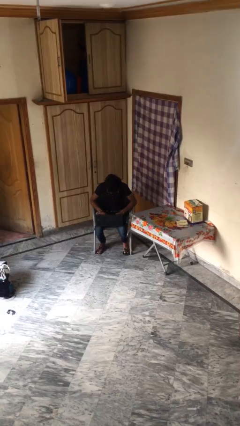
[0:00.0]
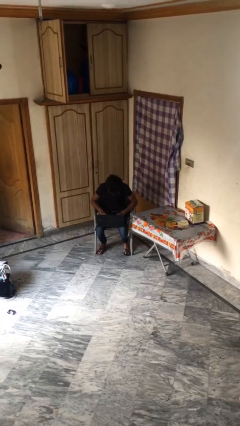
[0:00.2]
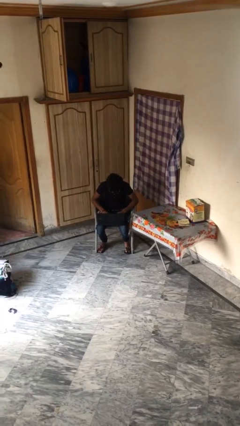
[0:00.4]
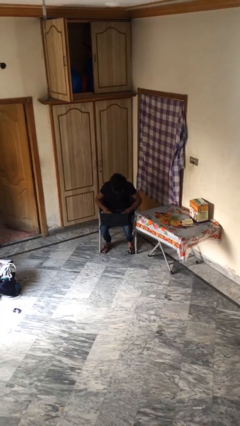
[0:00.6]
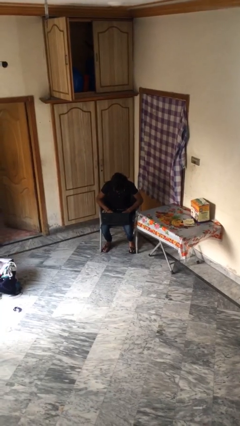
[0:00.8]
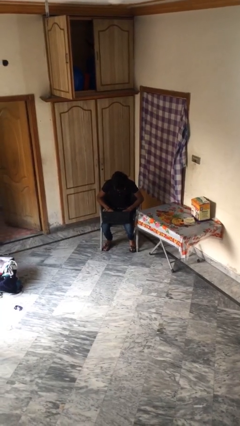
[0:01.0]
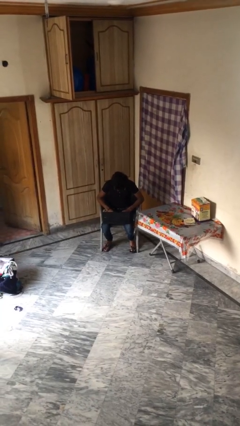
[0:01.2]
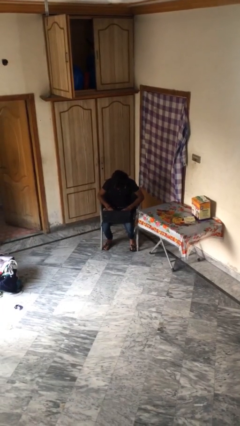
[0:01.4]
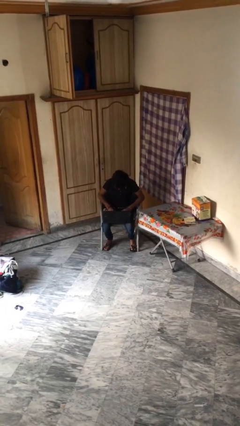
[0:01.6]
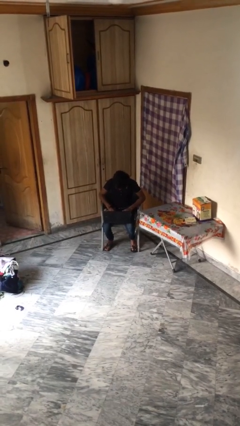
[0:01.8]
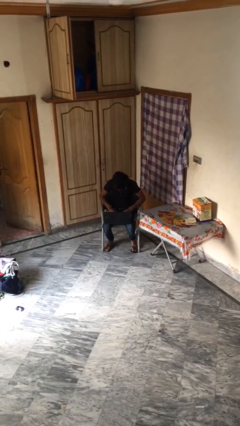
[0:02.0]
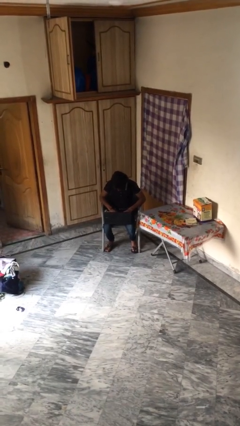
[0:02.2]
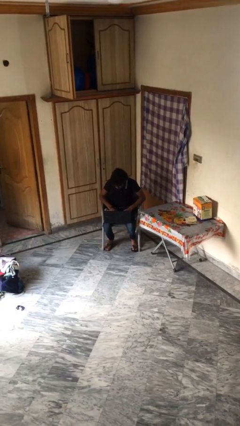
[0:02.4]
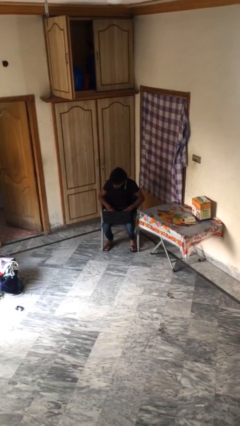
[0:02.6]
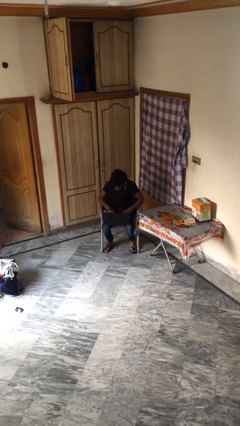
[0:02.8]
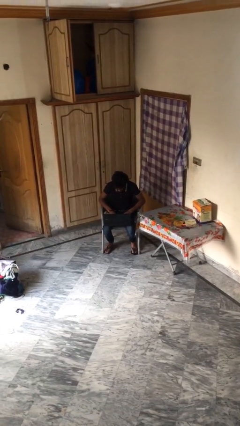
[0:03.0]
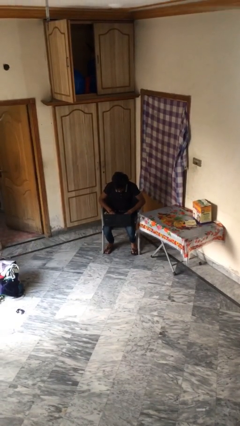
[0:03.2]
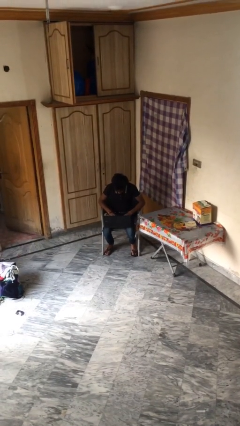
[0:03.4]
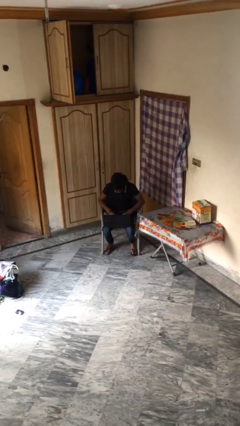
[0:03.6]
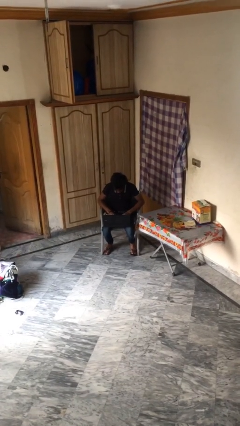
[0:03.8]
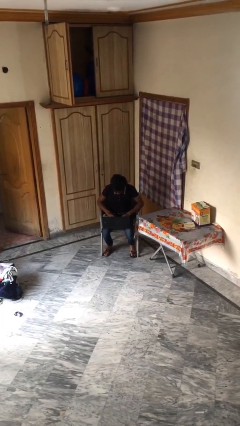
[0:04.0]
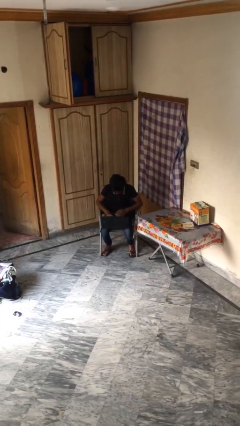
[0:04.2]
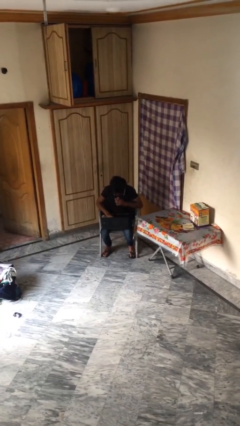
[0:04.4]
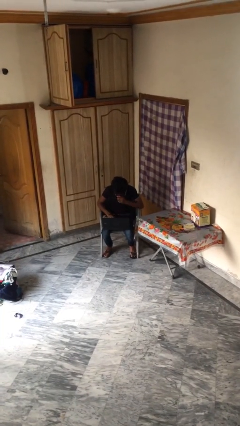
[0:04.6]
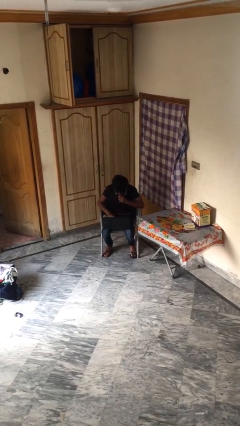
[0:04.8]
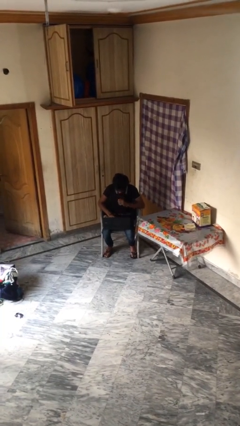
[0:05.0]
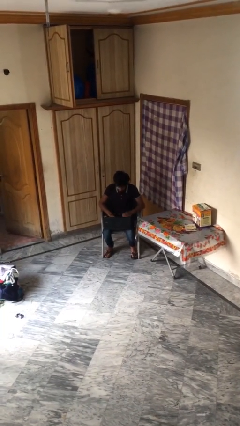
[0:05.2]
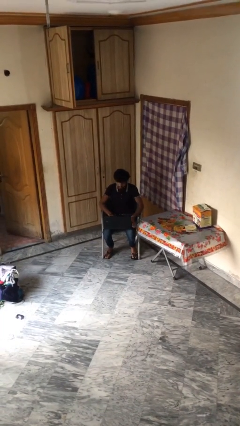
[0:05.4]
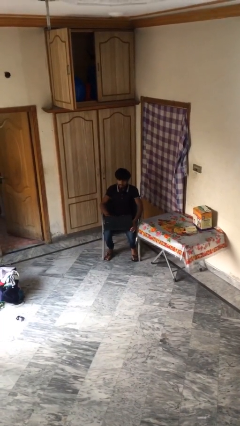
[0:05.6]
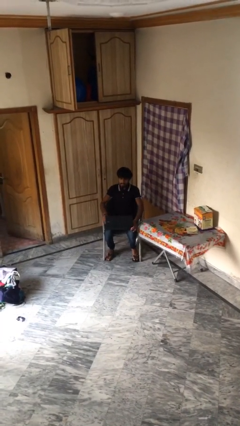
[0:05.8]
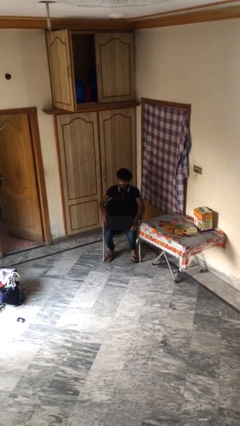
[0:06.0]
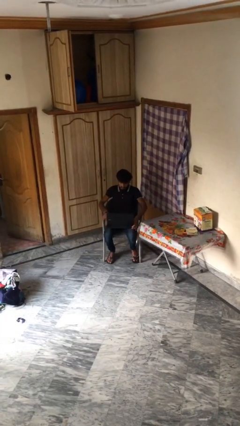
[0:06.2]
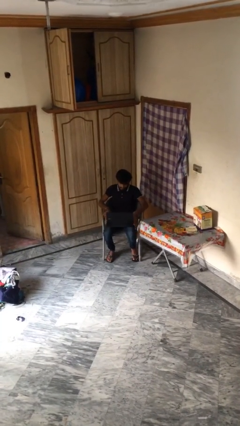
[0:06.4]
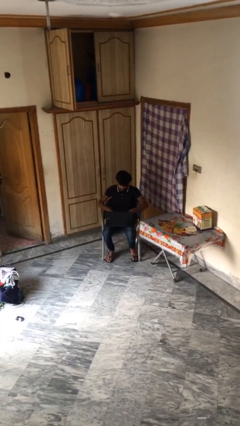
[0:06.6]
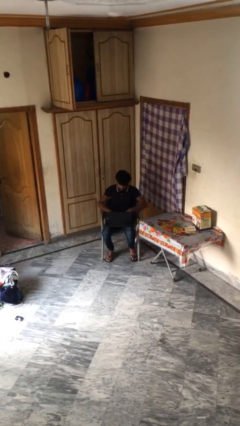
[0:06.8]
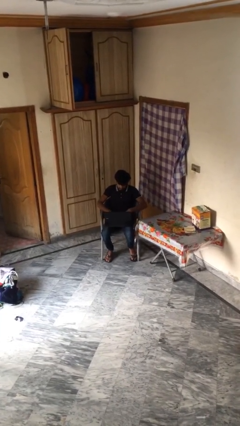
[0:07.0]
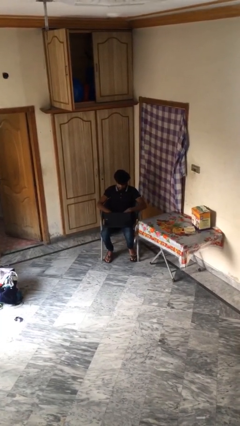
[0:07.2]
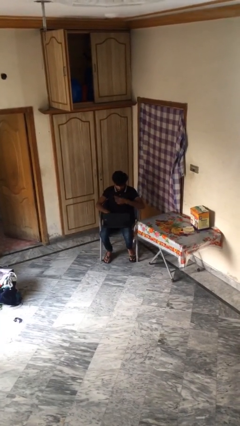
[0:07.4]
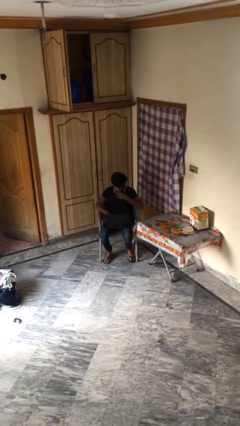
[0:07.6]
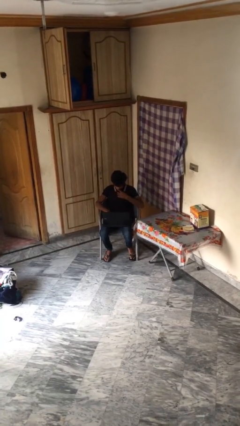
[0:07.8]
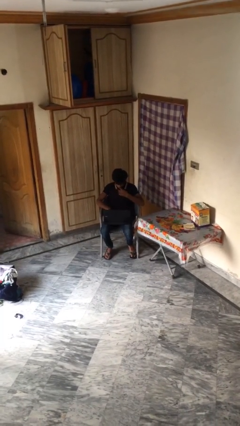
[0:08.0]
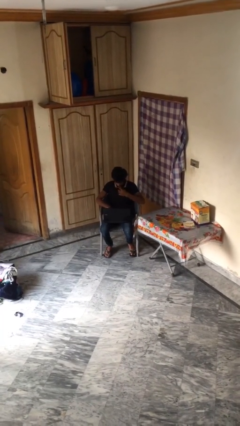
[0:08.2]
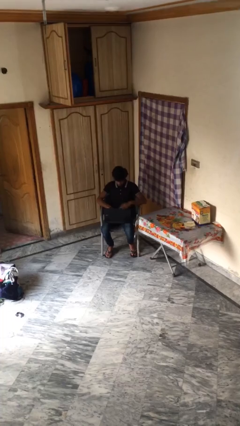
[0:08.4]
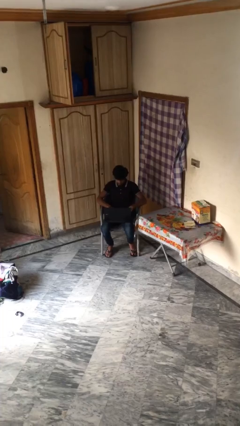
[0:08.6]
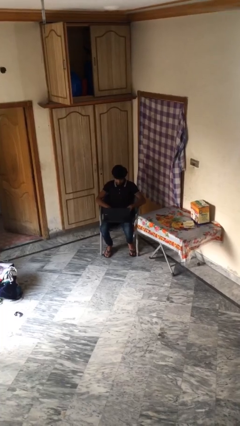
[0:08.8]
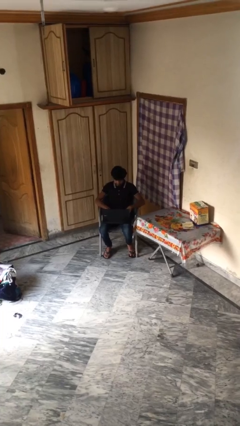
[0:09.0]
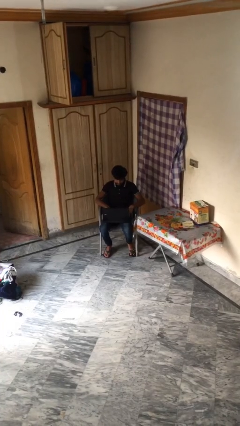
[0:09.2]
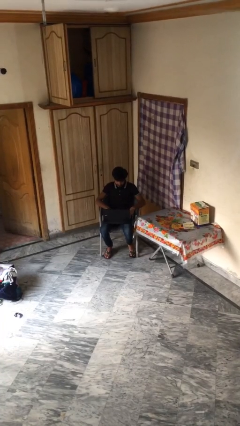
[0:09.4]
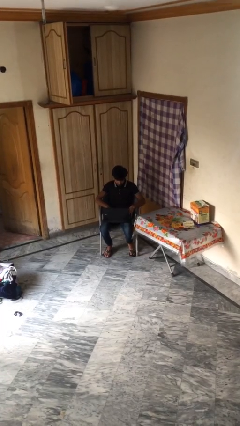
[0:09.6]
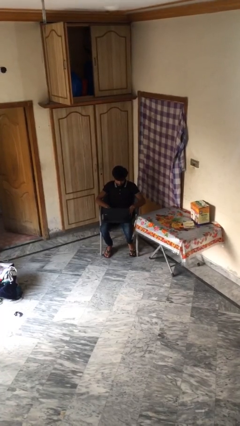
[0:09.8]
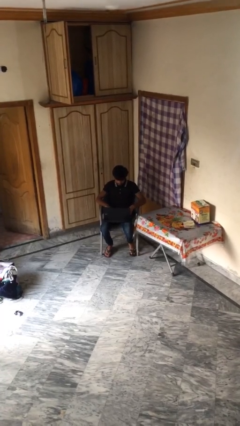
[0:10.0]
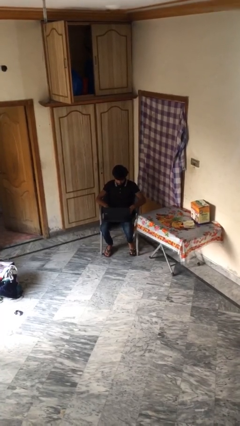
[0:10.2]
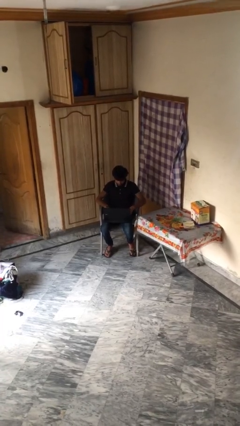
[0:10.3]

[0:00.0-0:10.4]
person interacts with laptop

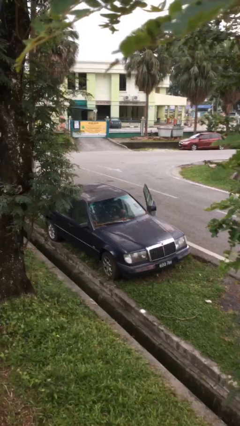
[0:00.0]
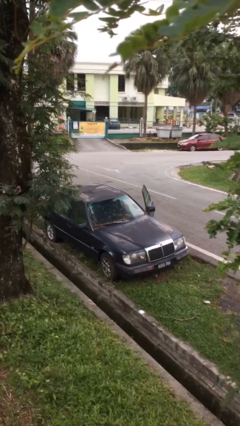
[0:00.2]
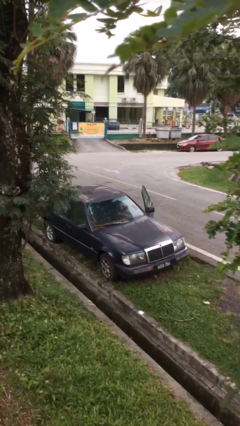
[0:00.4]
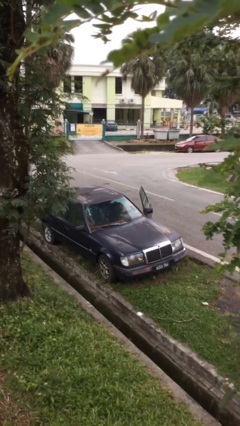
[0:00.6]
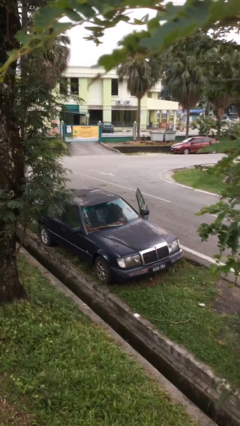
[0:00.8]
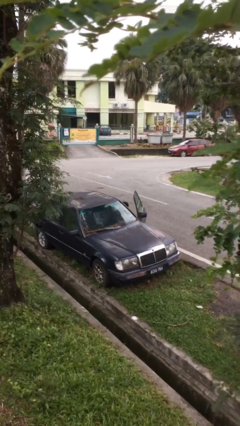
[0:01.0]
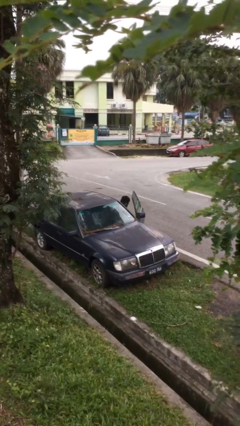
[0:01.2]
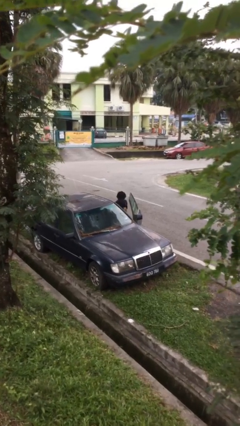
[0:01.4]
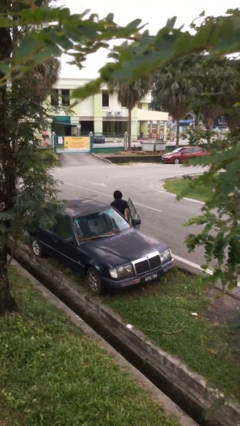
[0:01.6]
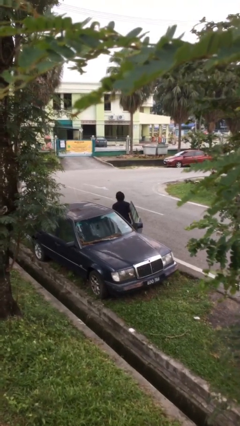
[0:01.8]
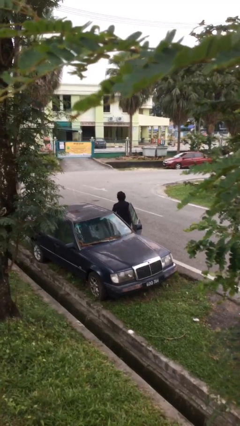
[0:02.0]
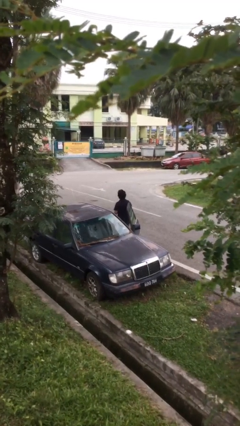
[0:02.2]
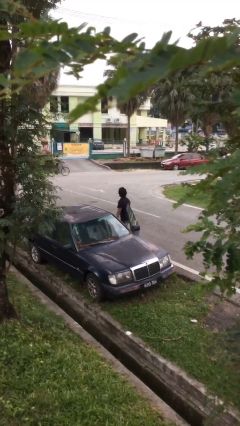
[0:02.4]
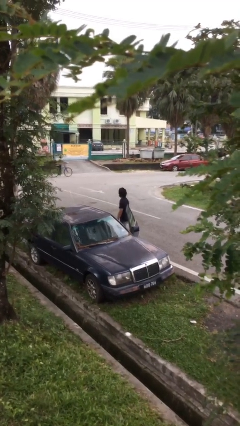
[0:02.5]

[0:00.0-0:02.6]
person exits car

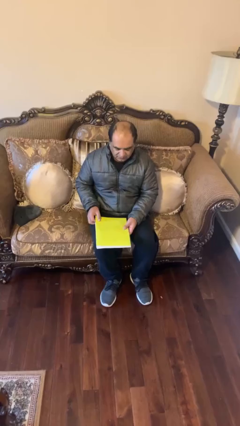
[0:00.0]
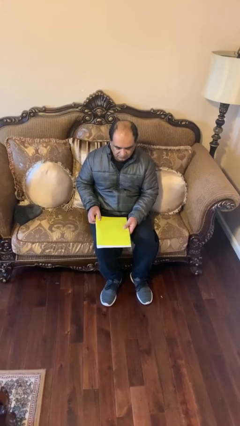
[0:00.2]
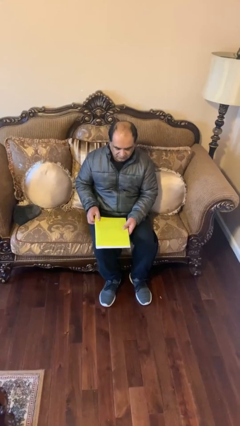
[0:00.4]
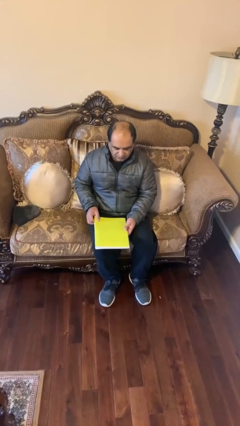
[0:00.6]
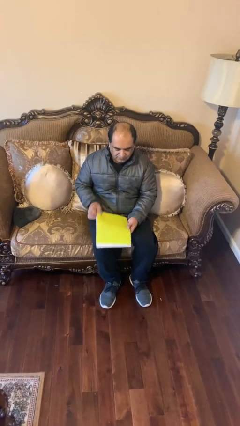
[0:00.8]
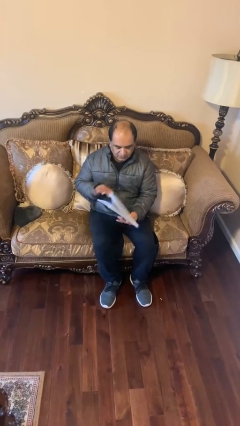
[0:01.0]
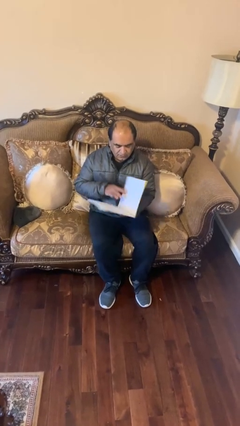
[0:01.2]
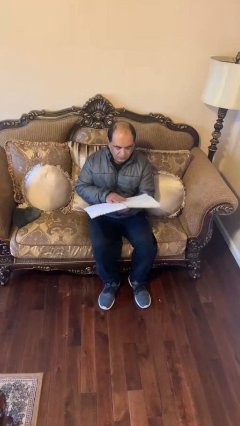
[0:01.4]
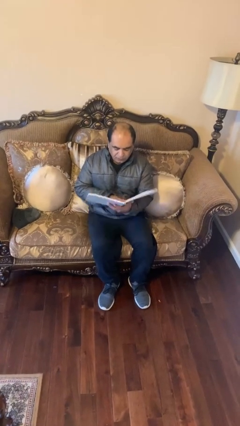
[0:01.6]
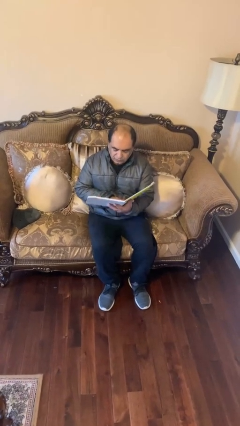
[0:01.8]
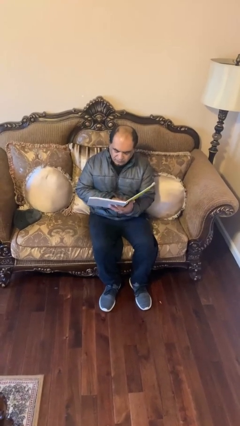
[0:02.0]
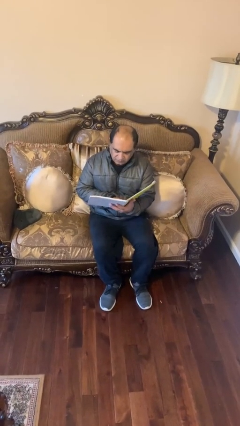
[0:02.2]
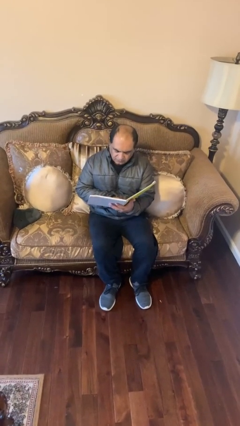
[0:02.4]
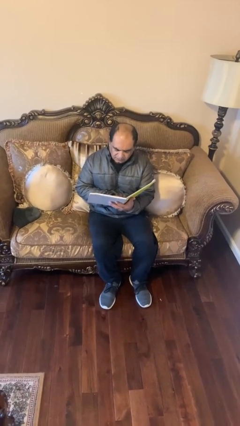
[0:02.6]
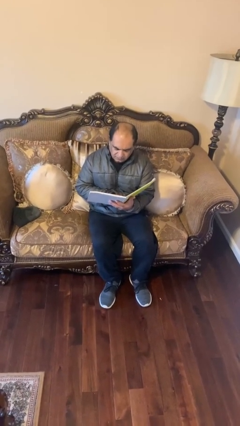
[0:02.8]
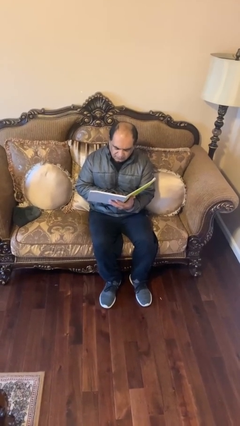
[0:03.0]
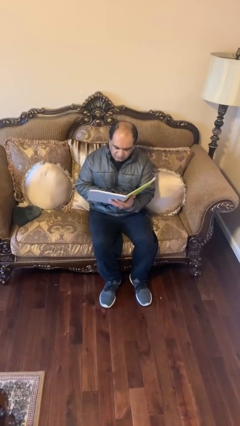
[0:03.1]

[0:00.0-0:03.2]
person reads document

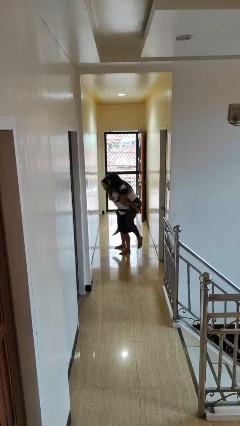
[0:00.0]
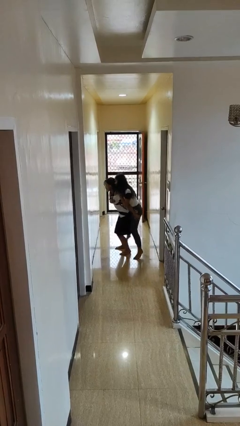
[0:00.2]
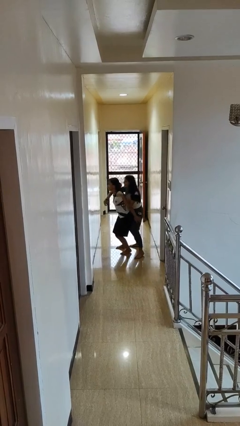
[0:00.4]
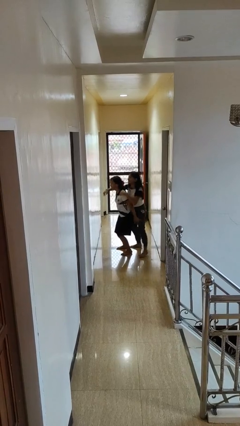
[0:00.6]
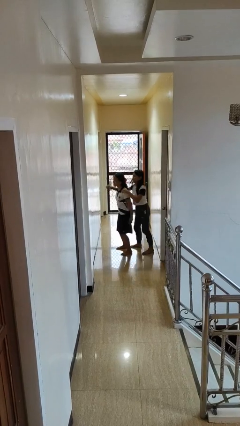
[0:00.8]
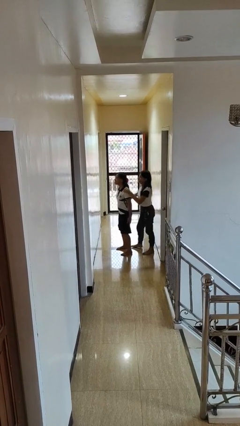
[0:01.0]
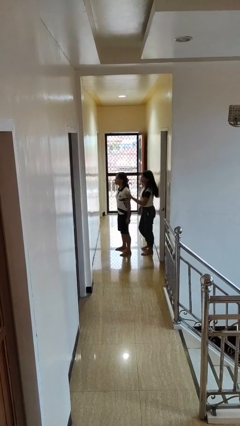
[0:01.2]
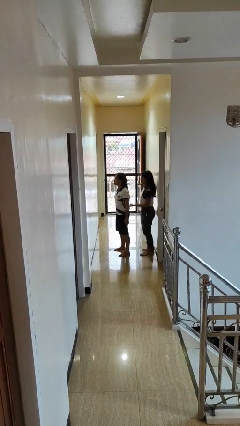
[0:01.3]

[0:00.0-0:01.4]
person puts down person

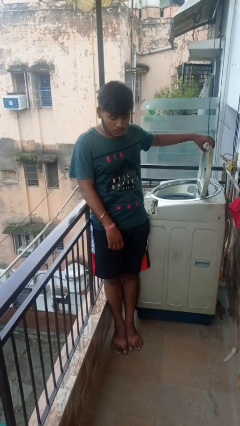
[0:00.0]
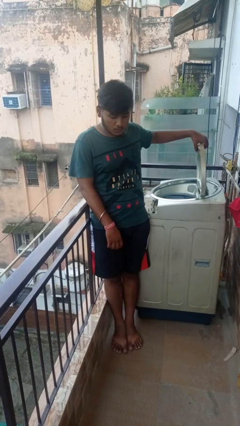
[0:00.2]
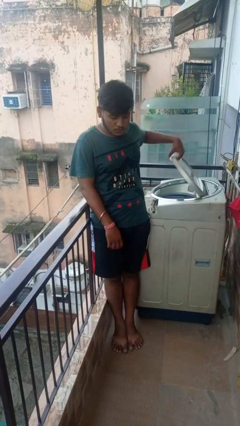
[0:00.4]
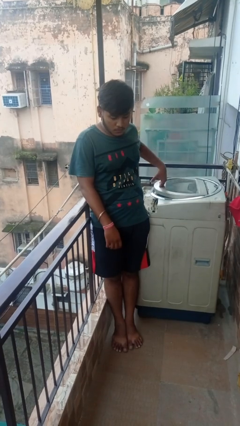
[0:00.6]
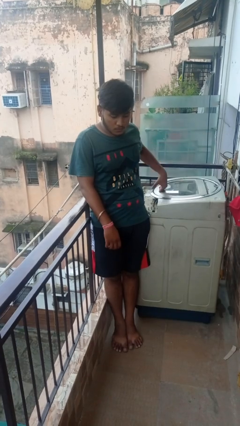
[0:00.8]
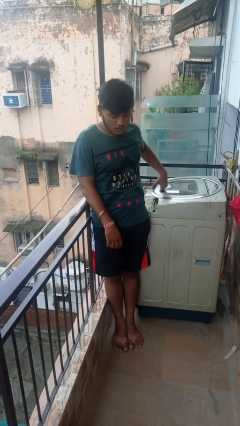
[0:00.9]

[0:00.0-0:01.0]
person closes clothes washer
